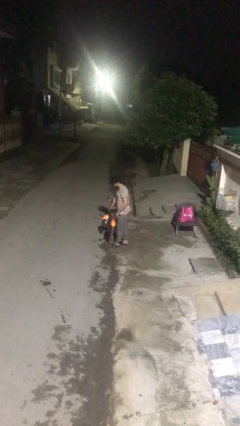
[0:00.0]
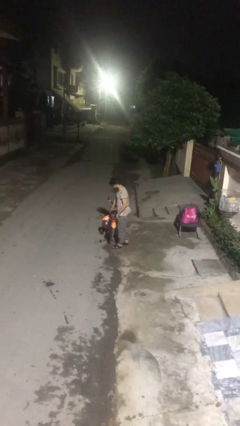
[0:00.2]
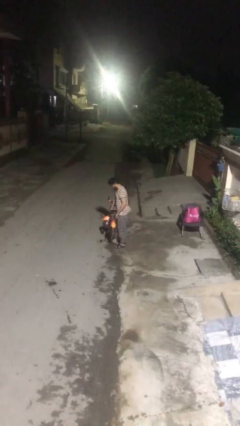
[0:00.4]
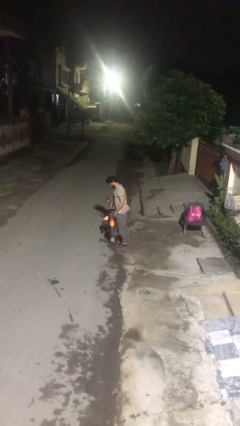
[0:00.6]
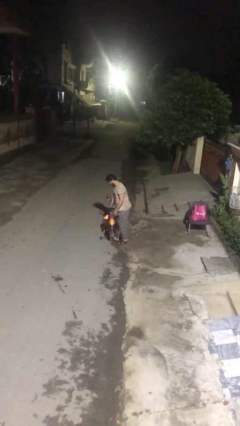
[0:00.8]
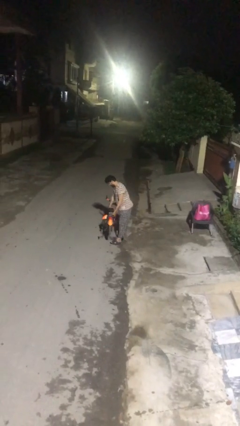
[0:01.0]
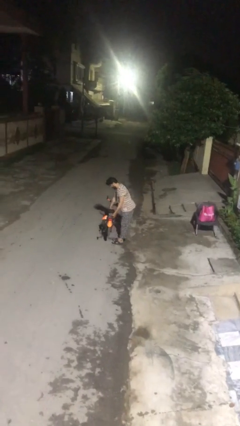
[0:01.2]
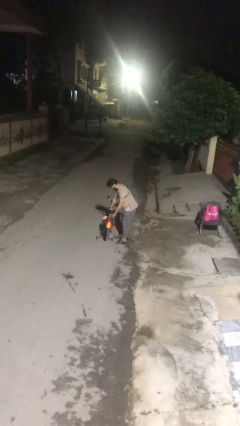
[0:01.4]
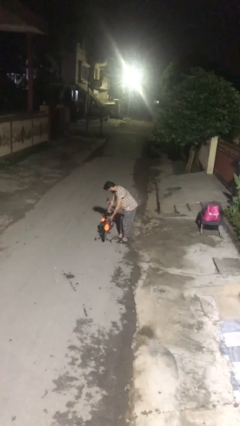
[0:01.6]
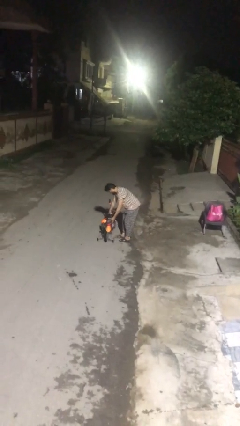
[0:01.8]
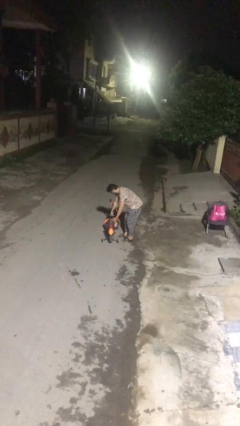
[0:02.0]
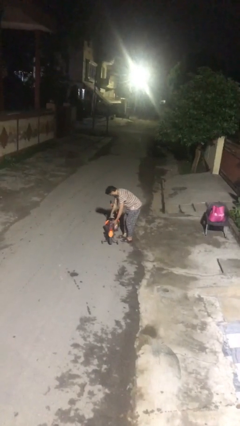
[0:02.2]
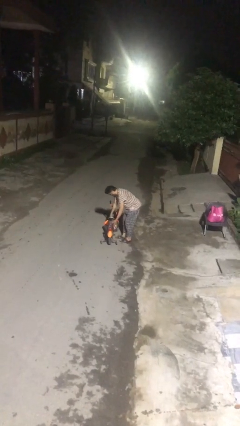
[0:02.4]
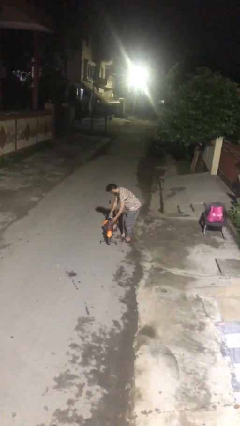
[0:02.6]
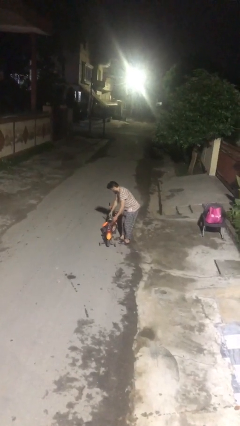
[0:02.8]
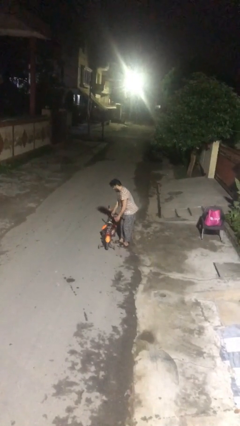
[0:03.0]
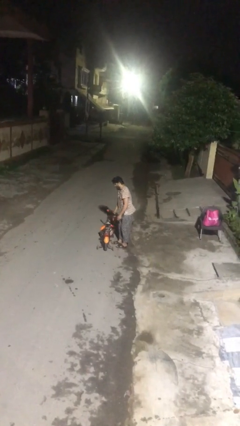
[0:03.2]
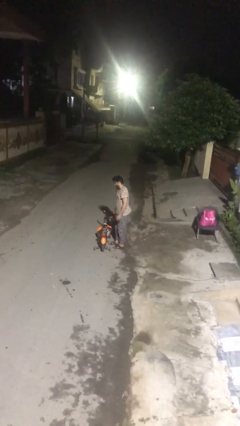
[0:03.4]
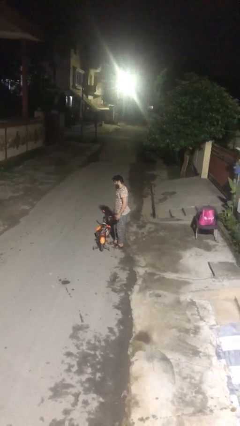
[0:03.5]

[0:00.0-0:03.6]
person puts down object on floor

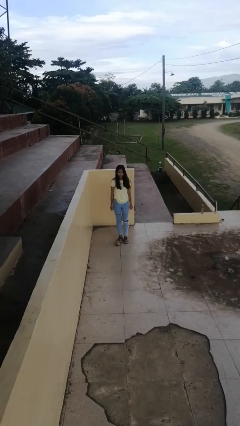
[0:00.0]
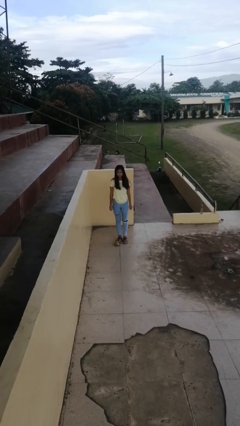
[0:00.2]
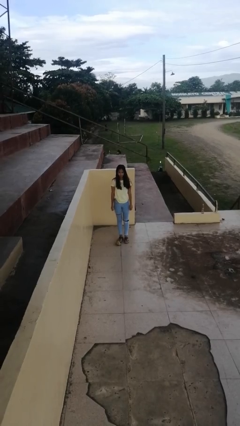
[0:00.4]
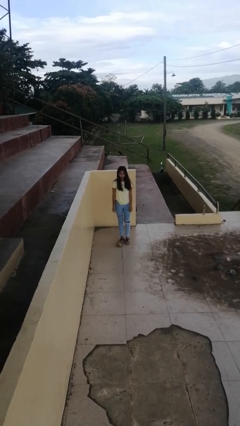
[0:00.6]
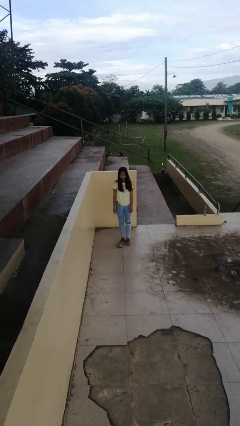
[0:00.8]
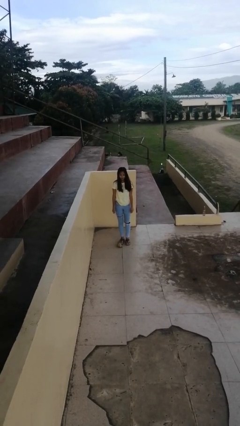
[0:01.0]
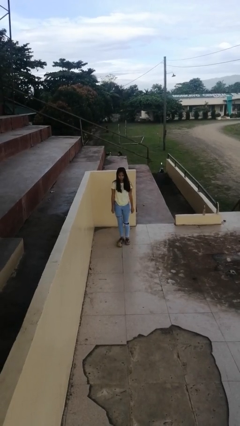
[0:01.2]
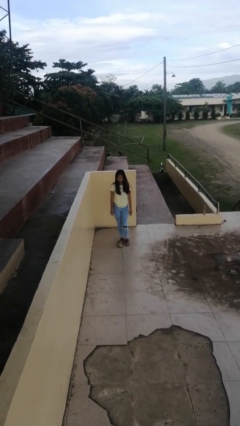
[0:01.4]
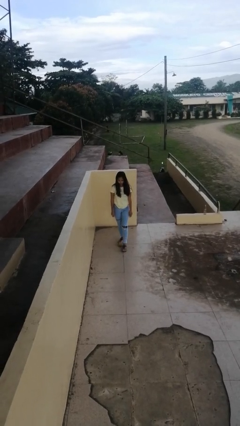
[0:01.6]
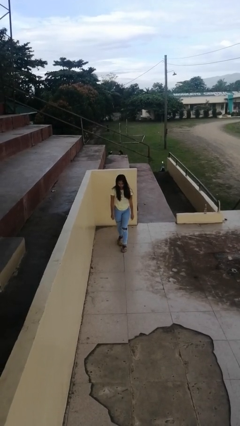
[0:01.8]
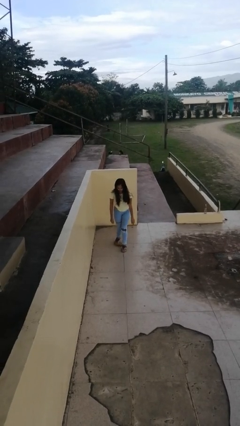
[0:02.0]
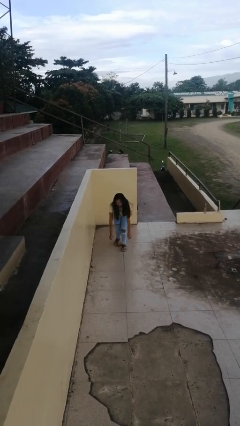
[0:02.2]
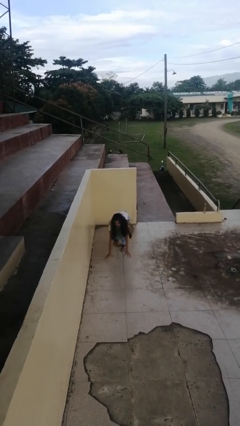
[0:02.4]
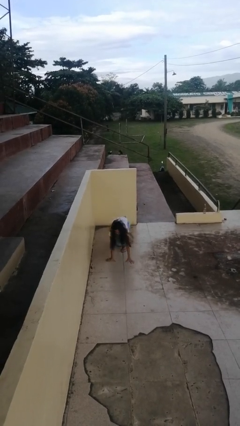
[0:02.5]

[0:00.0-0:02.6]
person trips on object on floor

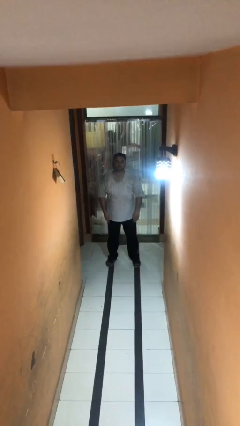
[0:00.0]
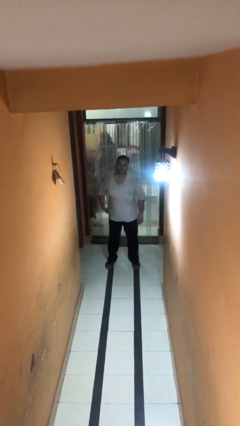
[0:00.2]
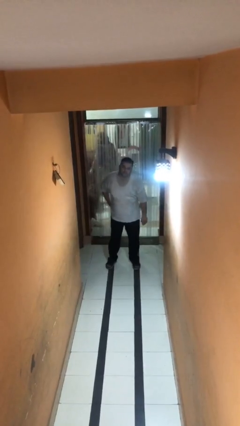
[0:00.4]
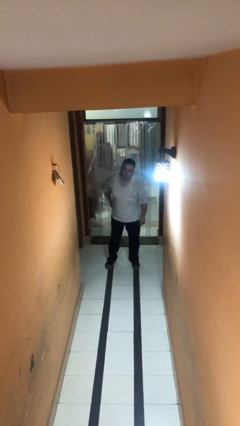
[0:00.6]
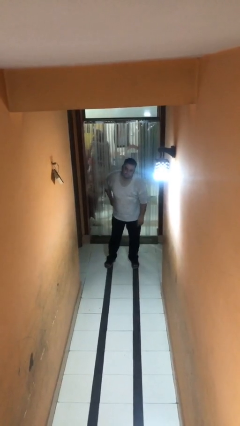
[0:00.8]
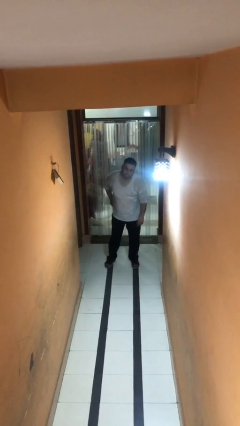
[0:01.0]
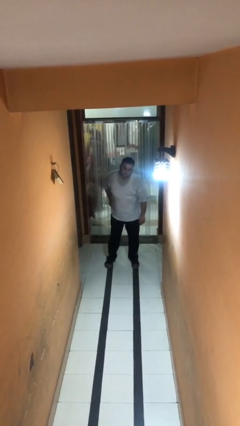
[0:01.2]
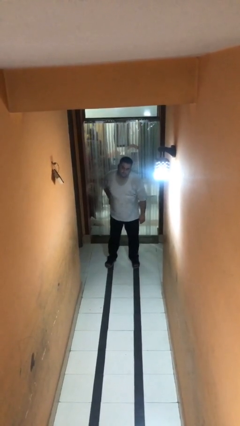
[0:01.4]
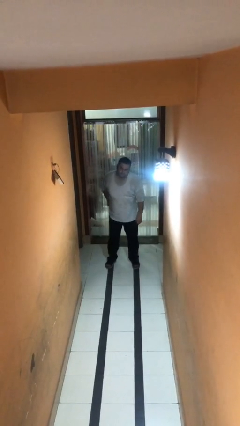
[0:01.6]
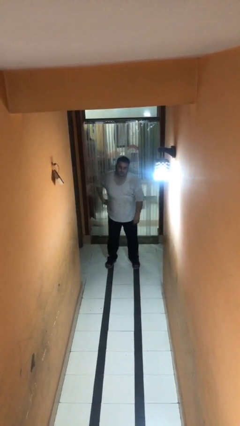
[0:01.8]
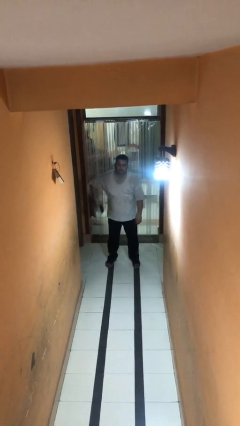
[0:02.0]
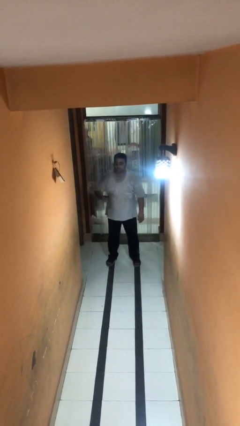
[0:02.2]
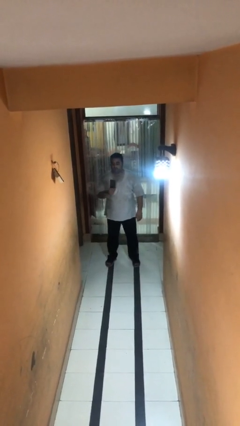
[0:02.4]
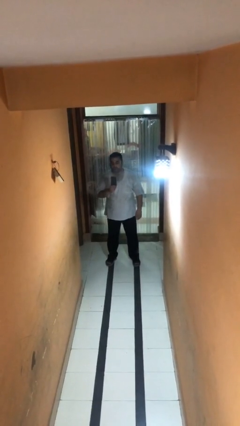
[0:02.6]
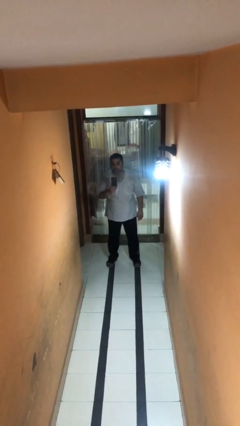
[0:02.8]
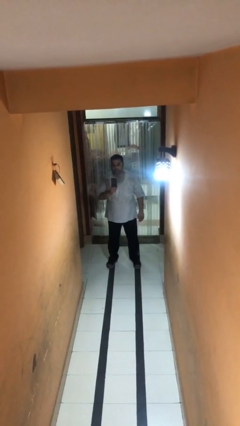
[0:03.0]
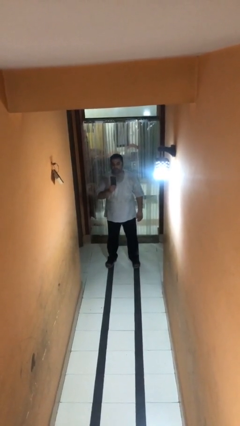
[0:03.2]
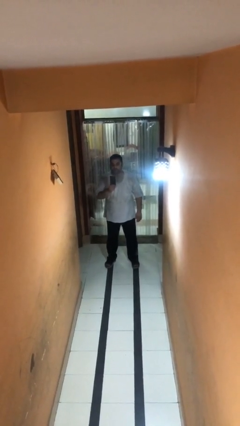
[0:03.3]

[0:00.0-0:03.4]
person takes phone from pocket

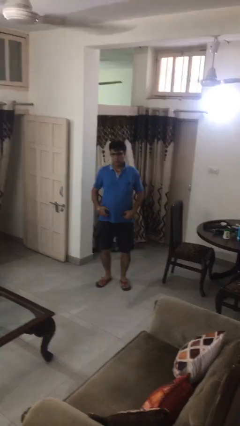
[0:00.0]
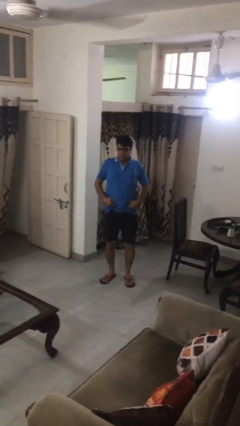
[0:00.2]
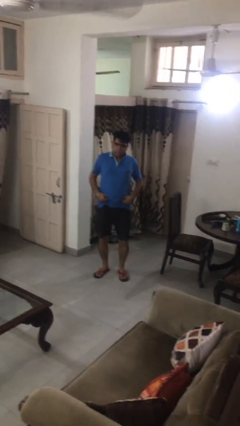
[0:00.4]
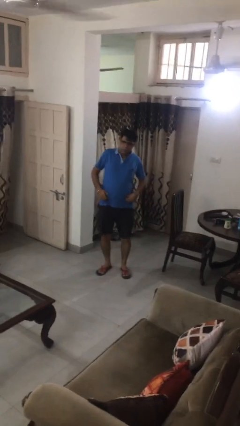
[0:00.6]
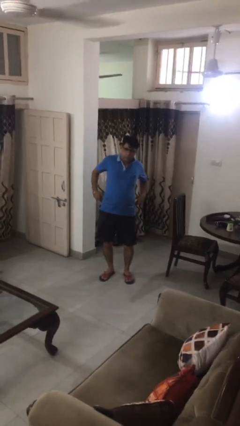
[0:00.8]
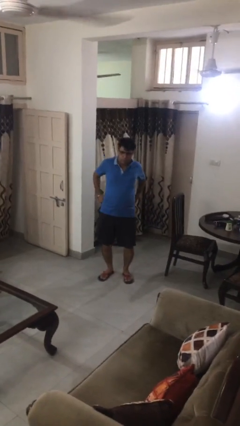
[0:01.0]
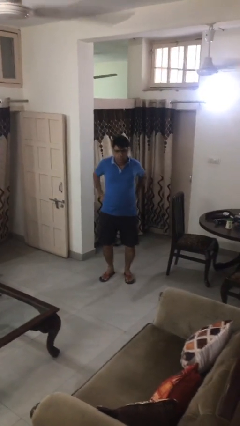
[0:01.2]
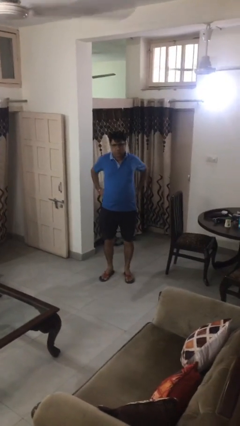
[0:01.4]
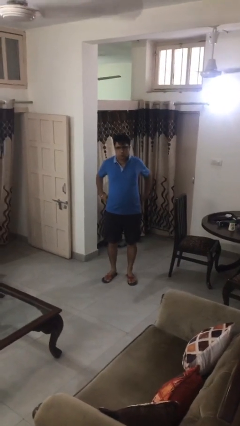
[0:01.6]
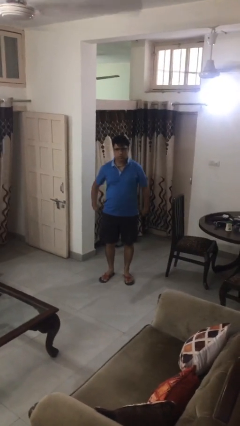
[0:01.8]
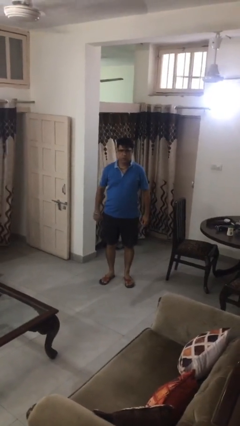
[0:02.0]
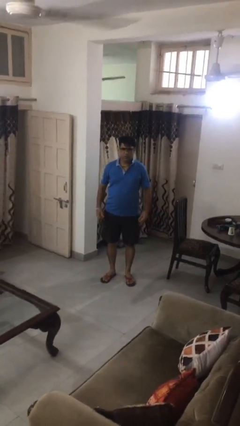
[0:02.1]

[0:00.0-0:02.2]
person hikes up pants

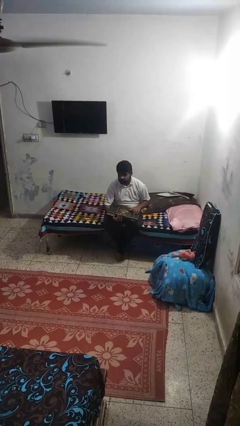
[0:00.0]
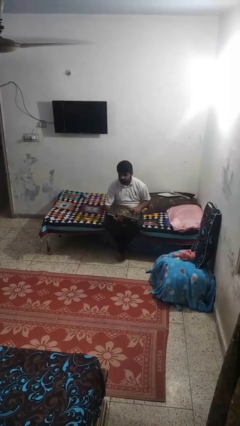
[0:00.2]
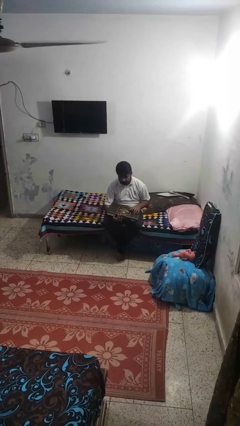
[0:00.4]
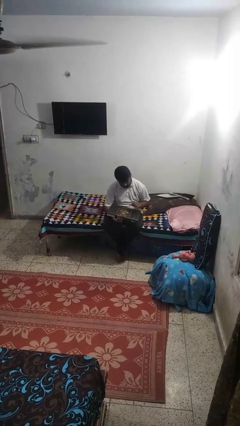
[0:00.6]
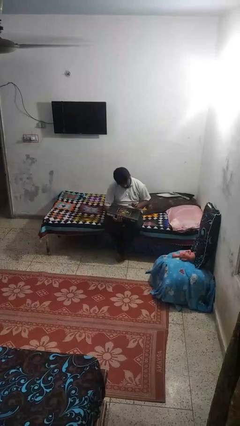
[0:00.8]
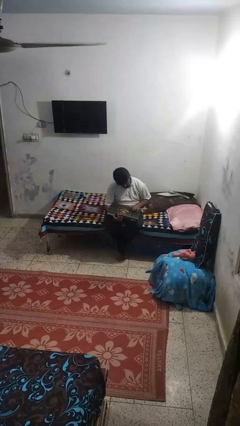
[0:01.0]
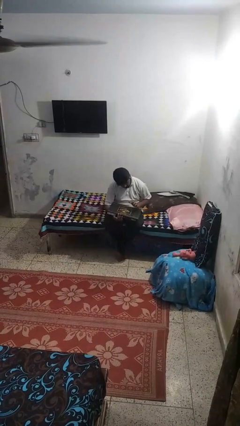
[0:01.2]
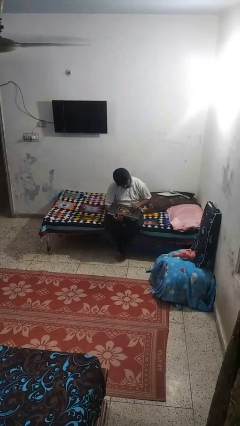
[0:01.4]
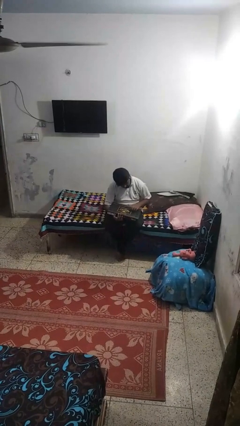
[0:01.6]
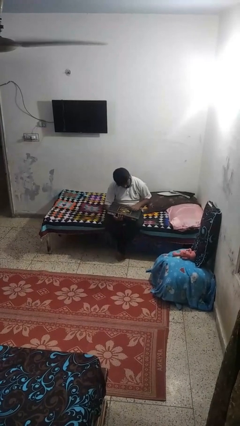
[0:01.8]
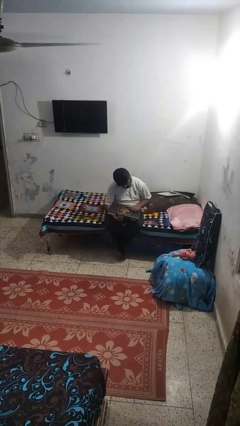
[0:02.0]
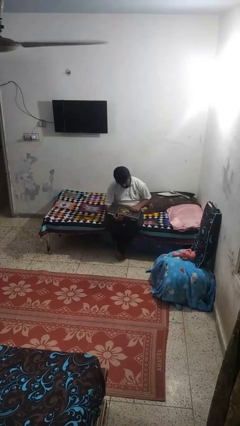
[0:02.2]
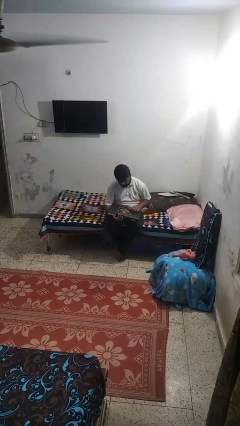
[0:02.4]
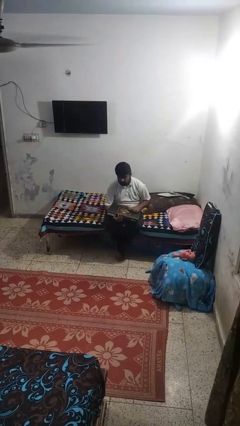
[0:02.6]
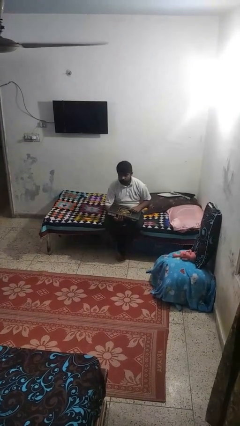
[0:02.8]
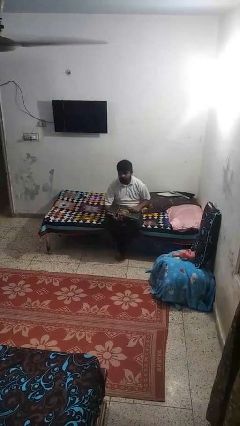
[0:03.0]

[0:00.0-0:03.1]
person taps object with finger

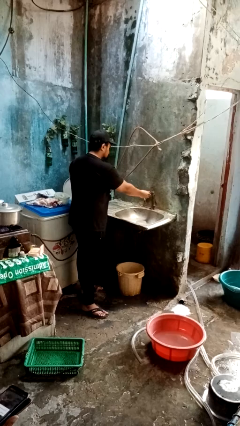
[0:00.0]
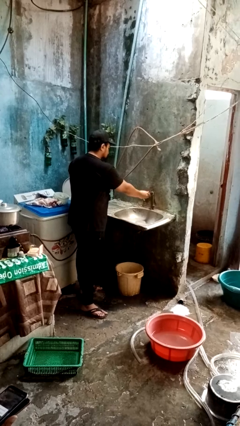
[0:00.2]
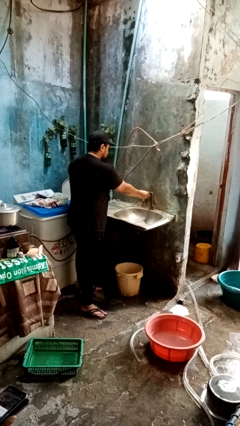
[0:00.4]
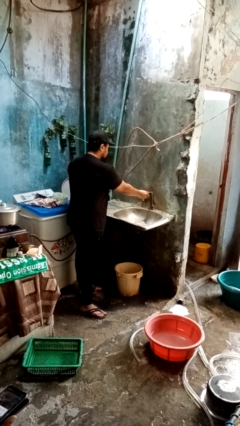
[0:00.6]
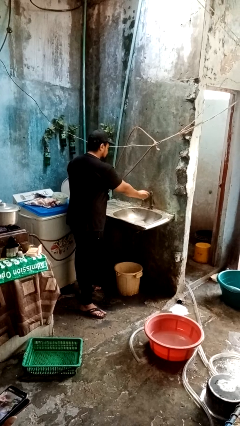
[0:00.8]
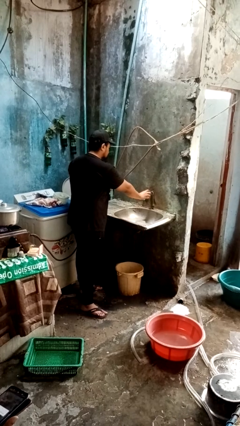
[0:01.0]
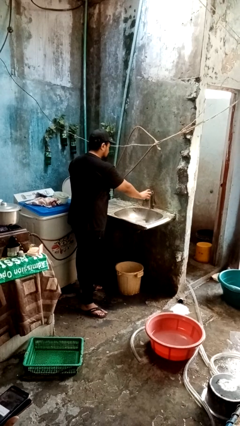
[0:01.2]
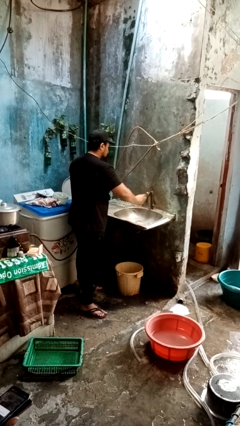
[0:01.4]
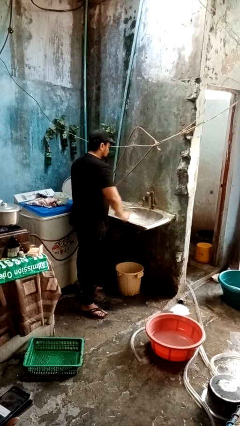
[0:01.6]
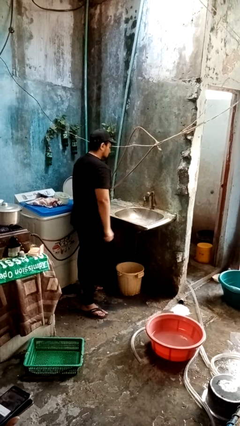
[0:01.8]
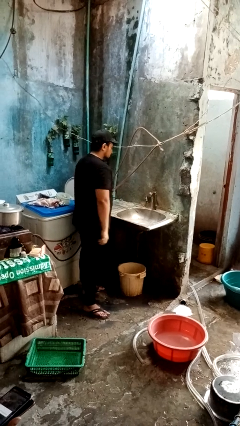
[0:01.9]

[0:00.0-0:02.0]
person turns on faucet

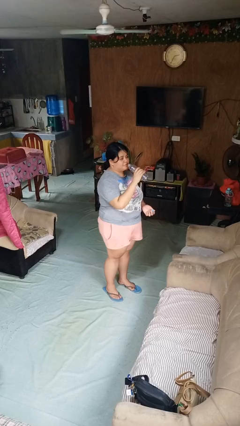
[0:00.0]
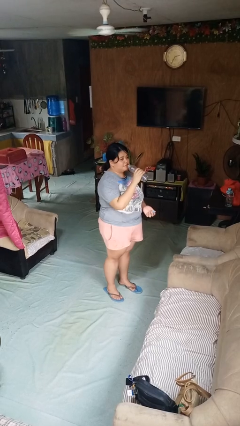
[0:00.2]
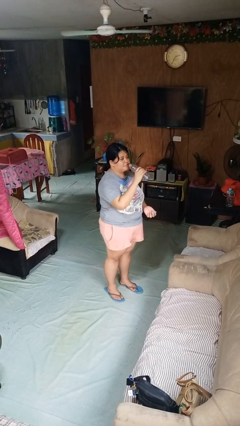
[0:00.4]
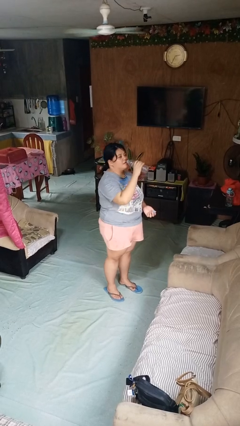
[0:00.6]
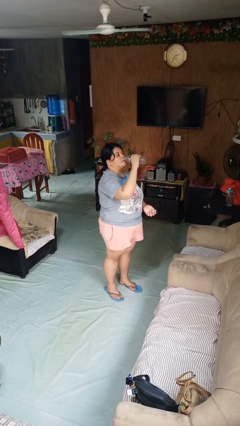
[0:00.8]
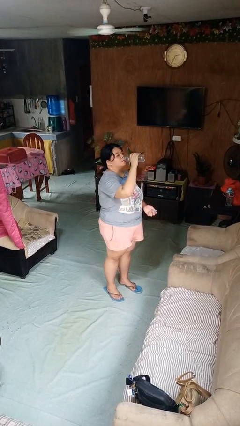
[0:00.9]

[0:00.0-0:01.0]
person drinks from bottle
